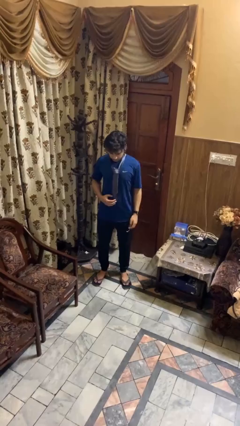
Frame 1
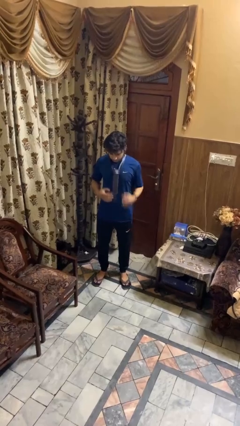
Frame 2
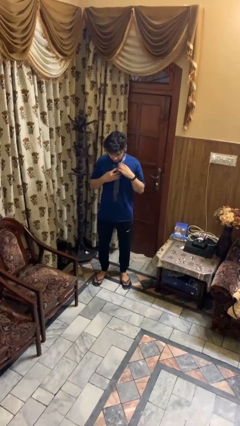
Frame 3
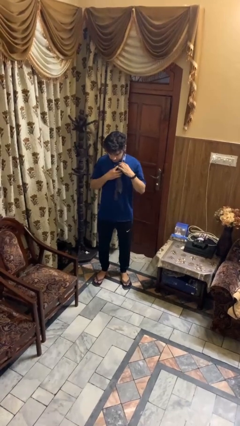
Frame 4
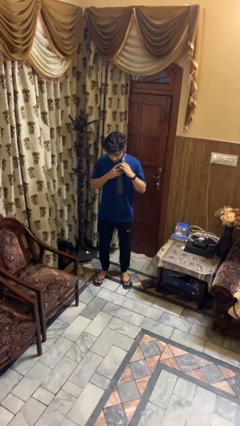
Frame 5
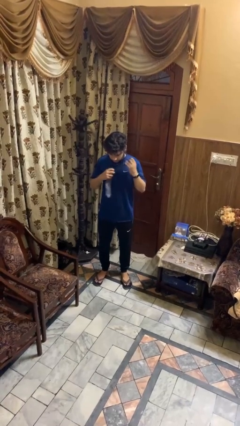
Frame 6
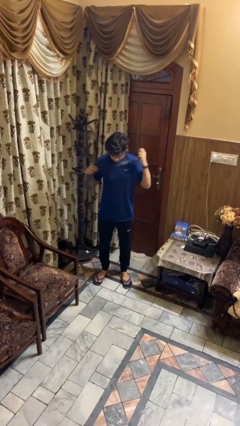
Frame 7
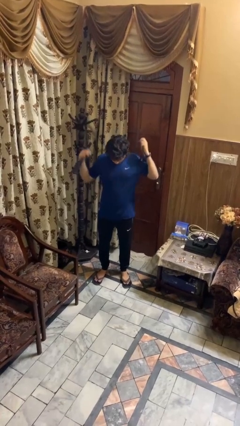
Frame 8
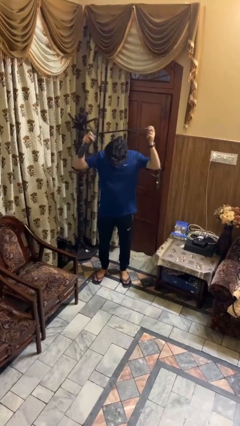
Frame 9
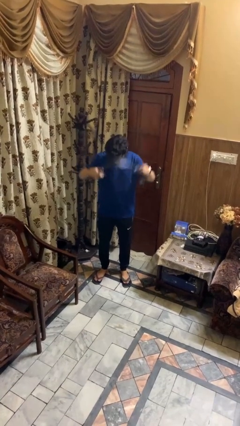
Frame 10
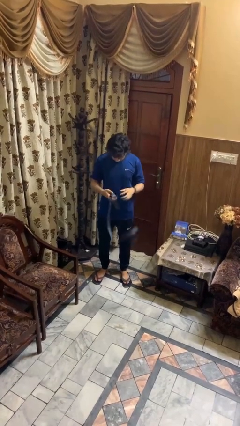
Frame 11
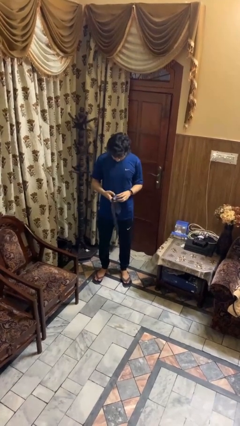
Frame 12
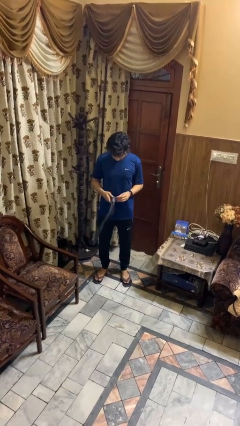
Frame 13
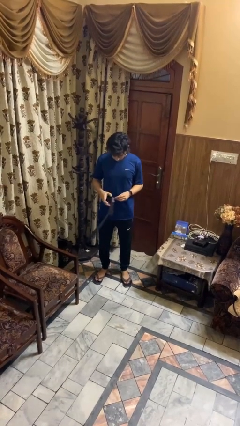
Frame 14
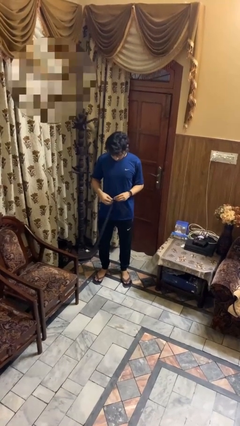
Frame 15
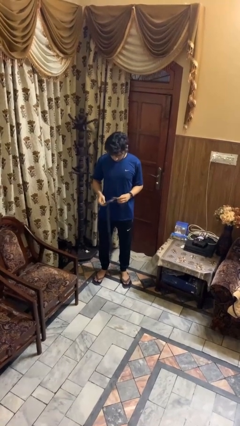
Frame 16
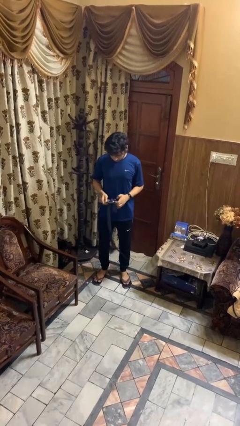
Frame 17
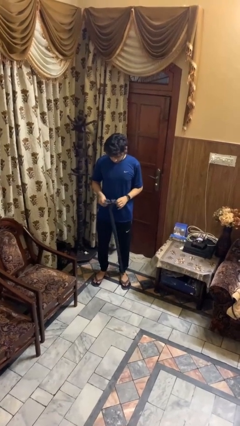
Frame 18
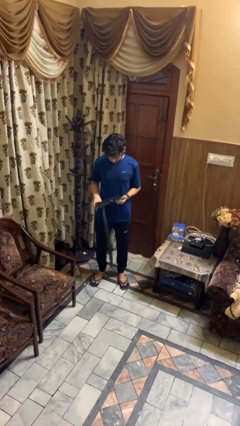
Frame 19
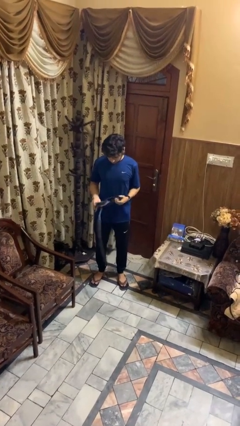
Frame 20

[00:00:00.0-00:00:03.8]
person takes off necktie

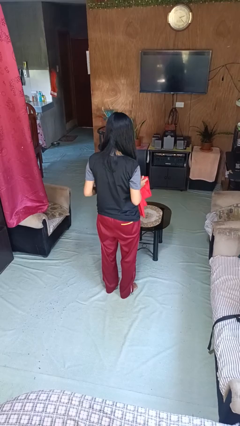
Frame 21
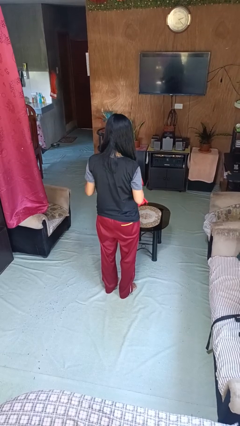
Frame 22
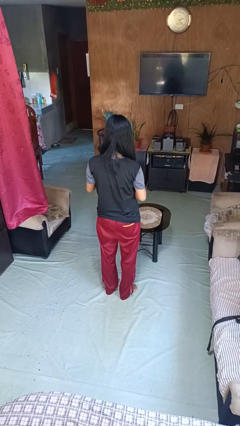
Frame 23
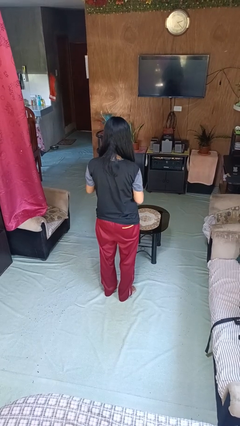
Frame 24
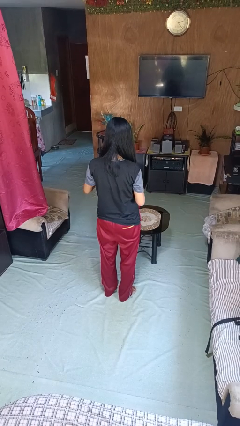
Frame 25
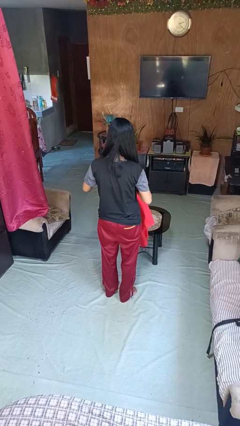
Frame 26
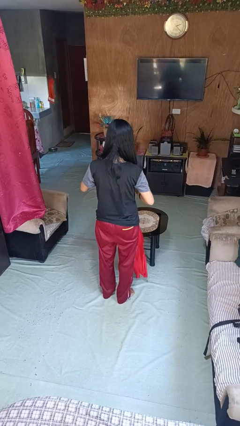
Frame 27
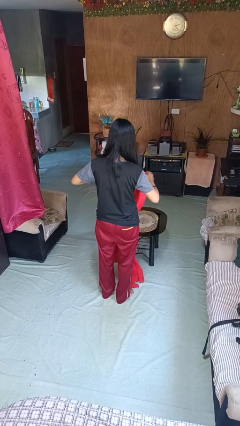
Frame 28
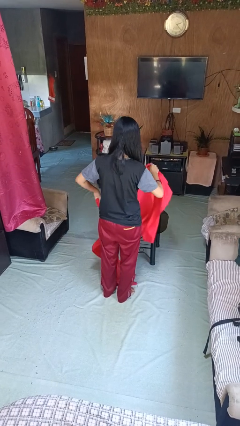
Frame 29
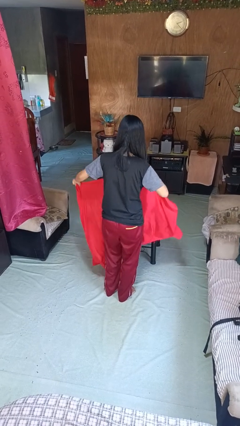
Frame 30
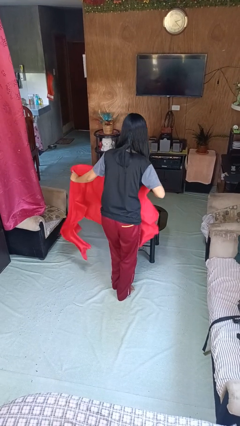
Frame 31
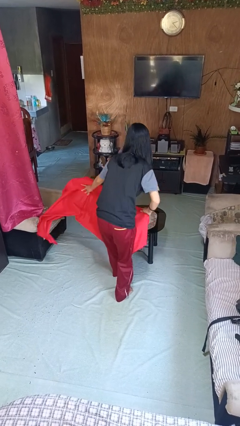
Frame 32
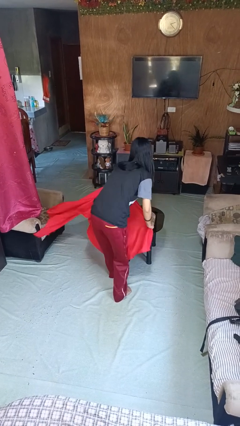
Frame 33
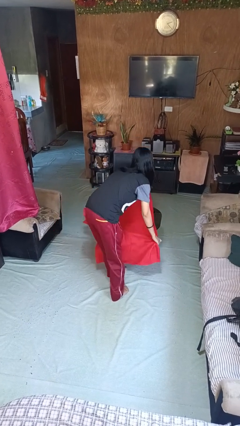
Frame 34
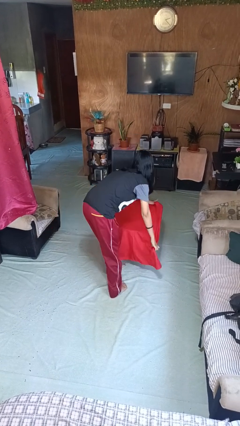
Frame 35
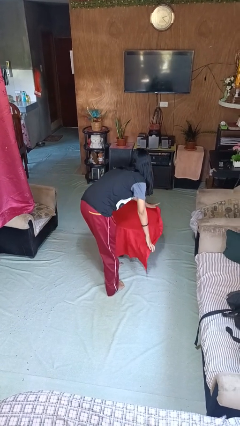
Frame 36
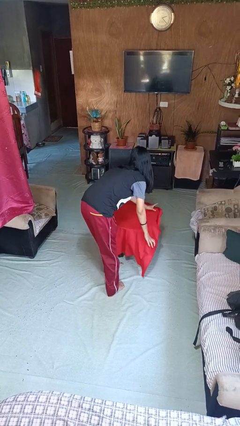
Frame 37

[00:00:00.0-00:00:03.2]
person spreads tablecloth

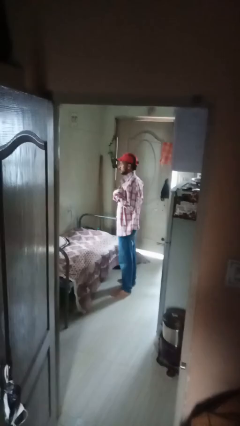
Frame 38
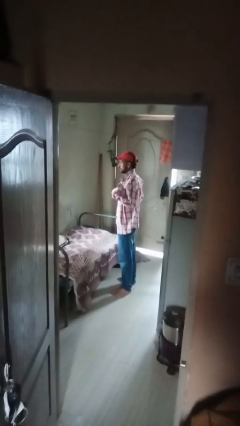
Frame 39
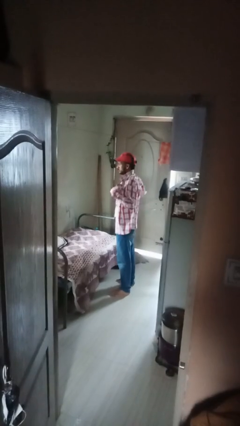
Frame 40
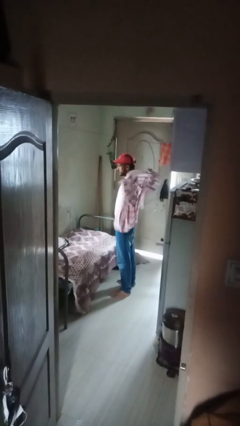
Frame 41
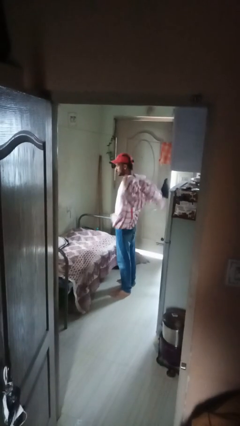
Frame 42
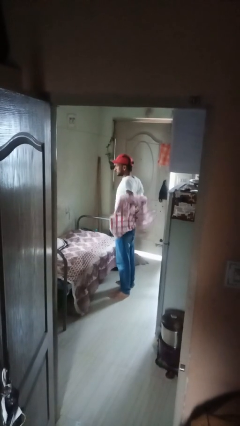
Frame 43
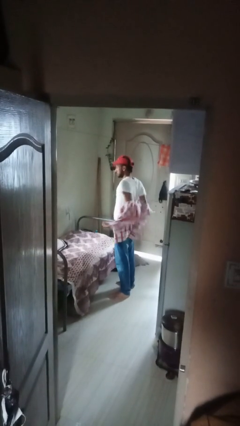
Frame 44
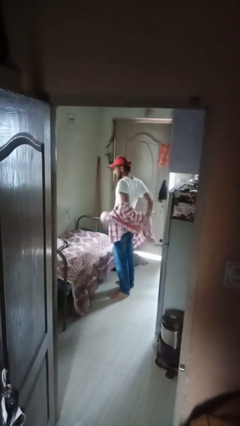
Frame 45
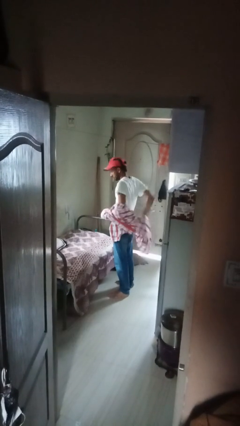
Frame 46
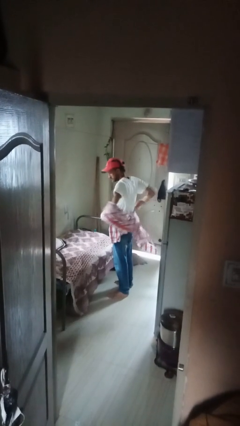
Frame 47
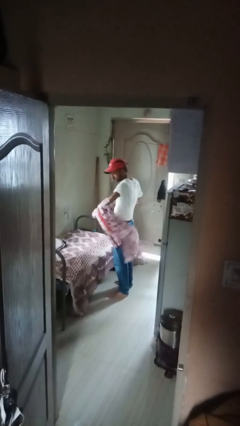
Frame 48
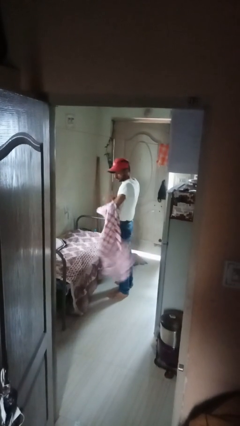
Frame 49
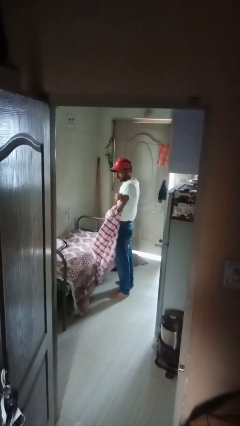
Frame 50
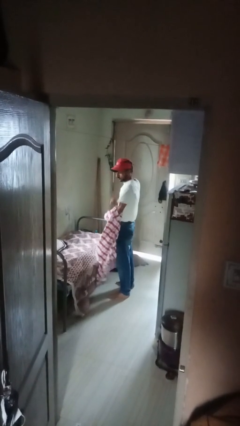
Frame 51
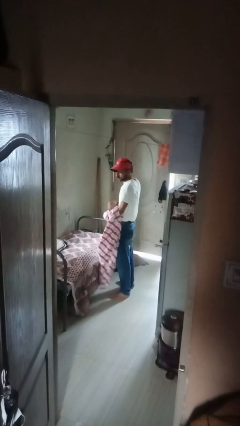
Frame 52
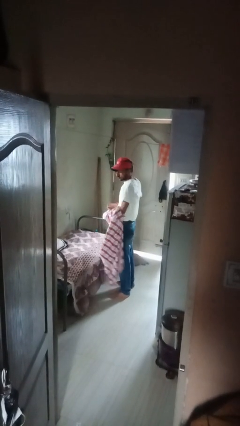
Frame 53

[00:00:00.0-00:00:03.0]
person takes off shirt

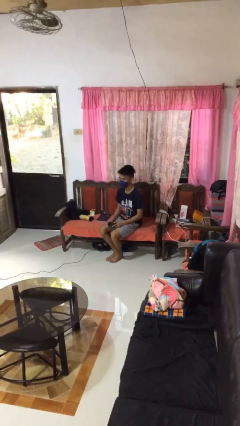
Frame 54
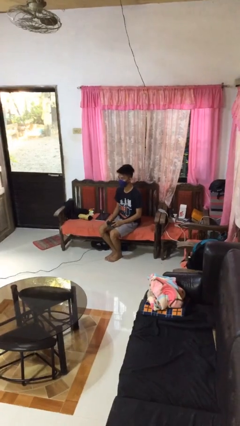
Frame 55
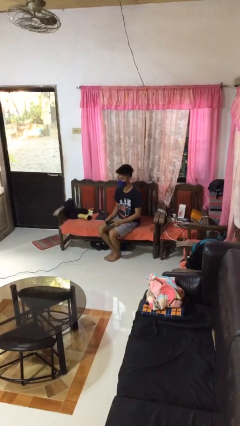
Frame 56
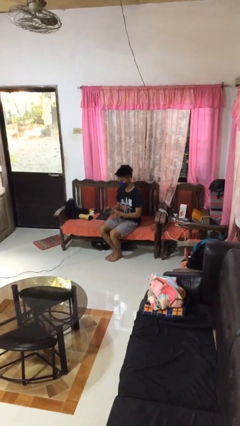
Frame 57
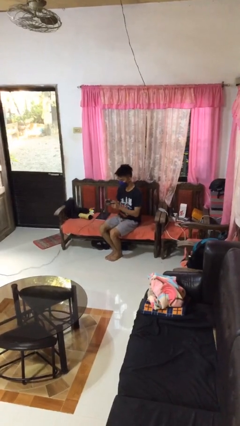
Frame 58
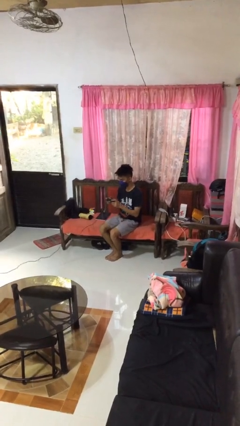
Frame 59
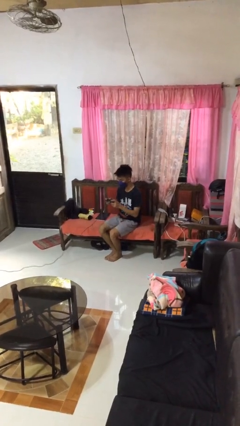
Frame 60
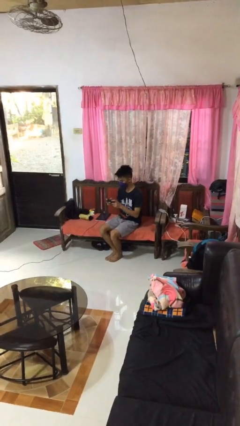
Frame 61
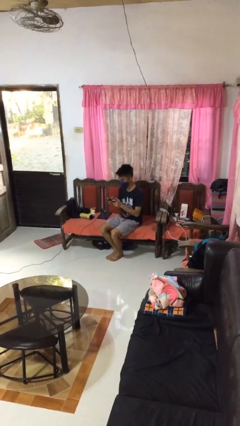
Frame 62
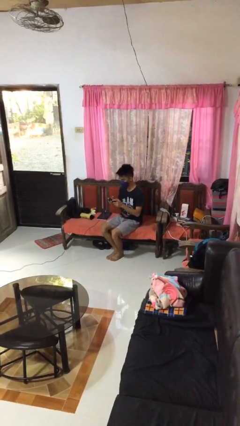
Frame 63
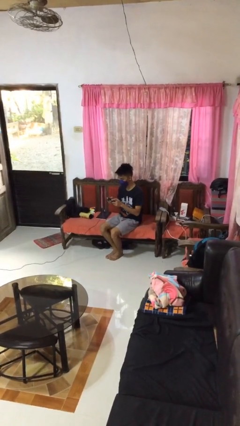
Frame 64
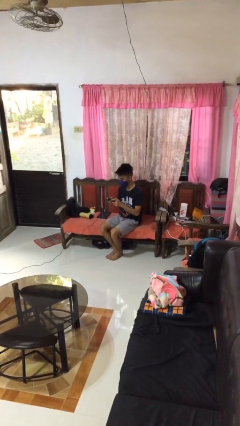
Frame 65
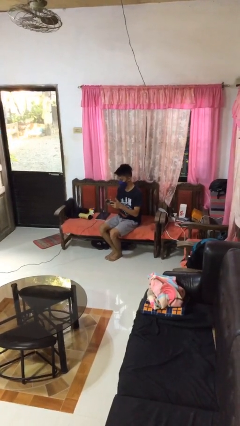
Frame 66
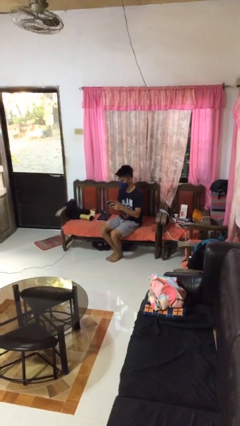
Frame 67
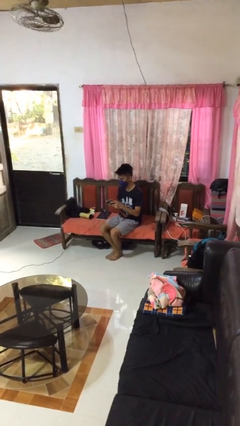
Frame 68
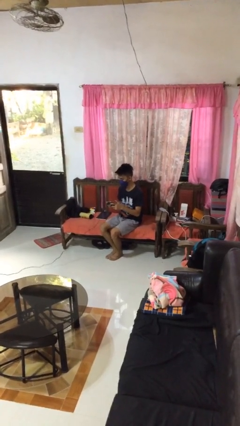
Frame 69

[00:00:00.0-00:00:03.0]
person interacts with handheld game

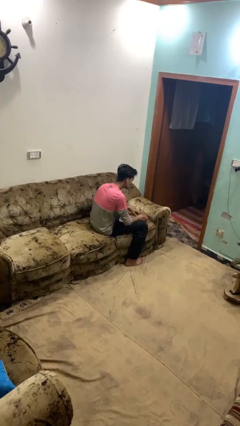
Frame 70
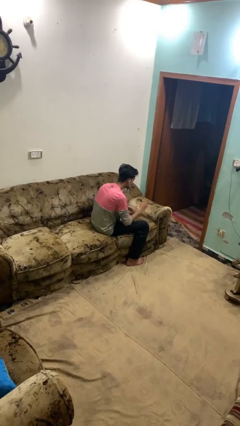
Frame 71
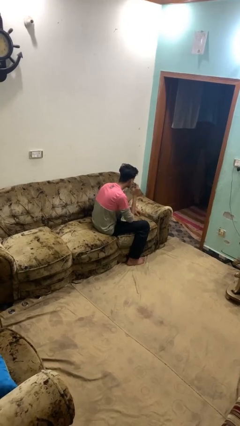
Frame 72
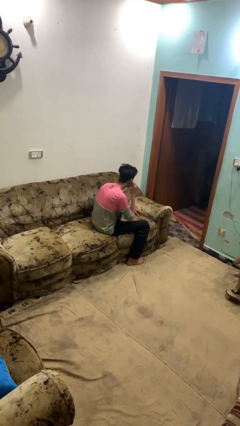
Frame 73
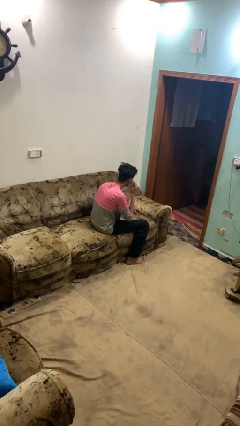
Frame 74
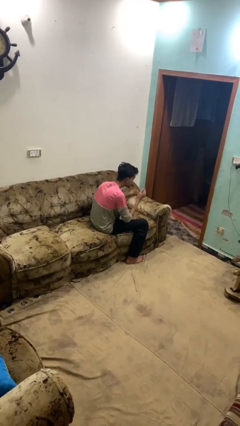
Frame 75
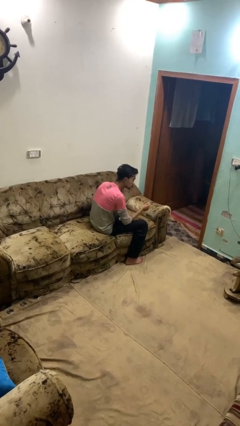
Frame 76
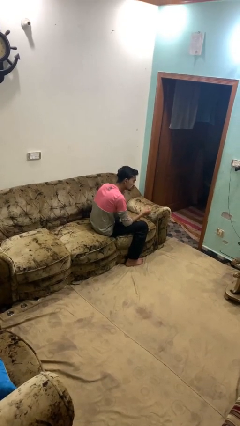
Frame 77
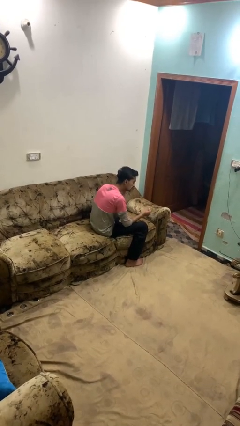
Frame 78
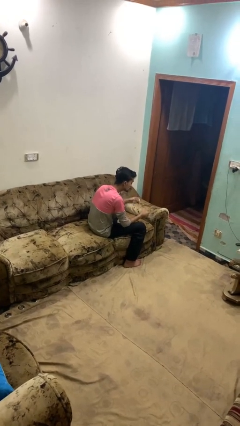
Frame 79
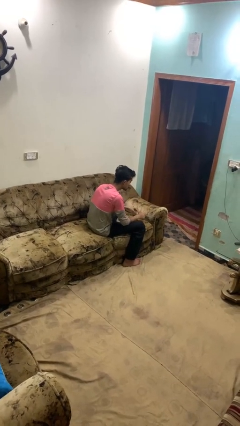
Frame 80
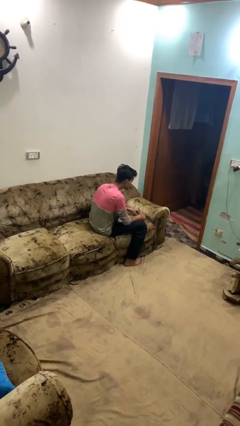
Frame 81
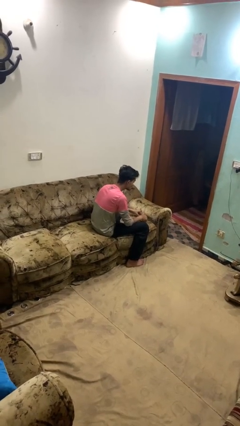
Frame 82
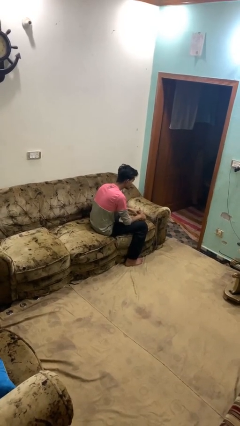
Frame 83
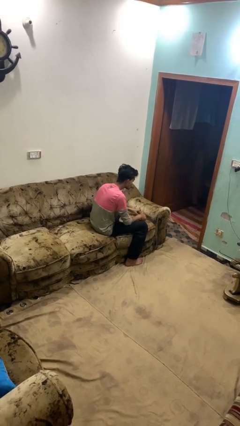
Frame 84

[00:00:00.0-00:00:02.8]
person takes off headphones

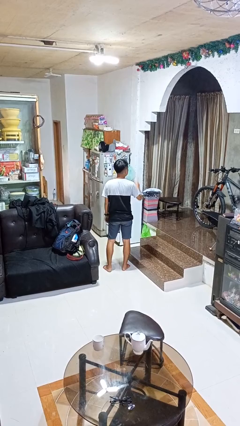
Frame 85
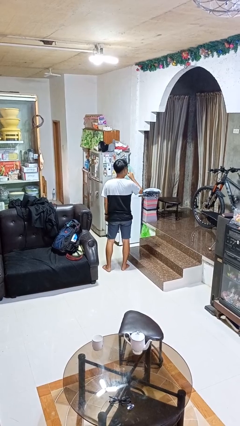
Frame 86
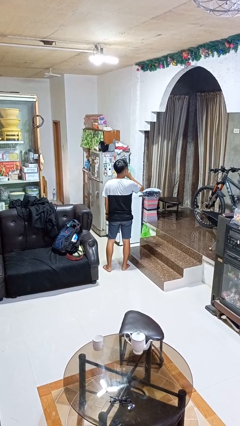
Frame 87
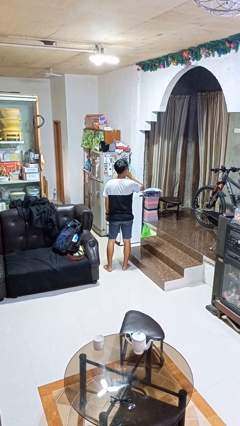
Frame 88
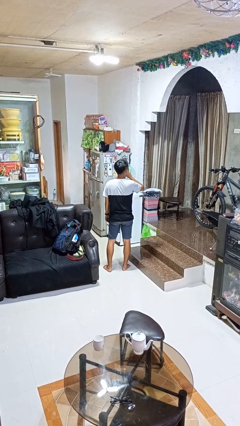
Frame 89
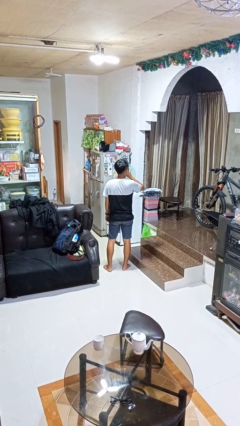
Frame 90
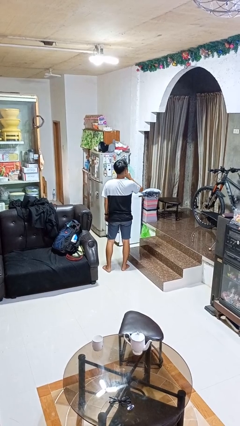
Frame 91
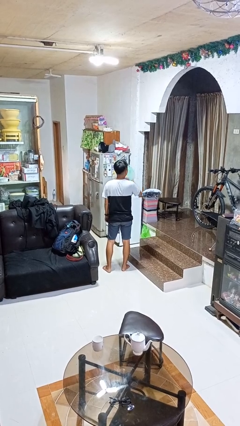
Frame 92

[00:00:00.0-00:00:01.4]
person gestures be quiet
